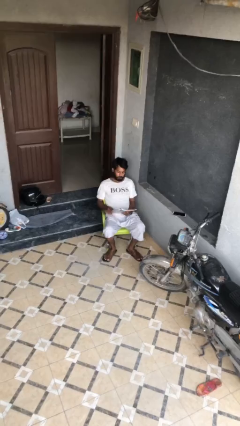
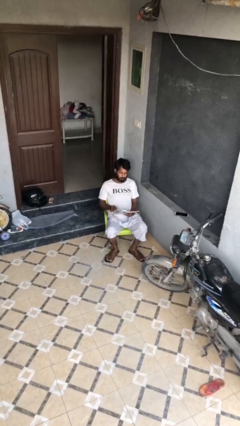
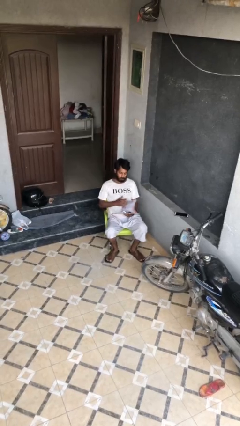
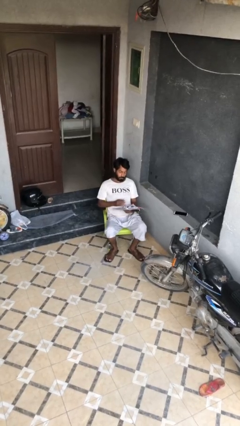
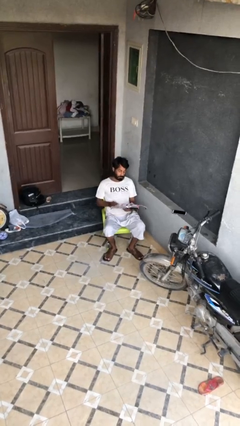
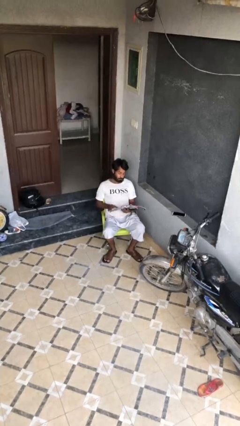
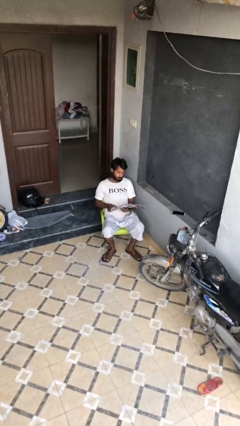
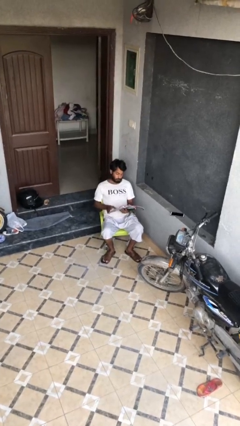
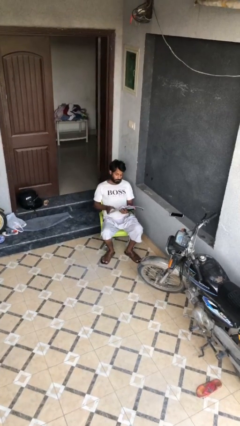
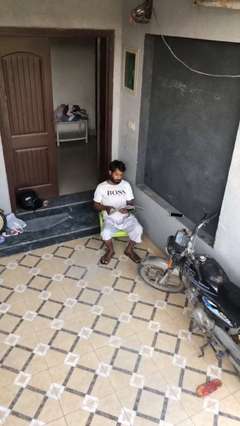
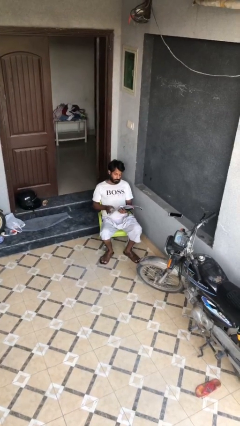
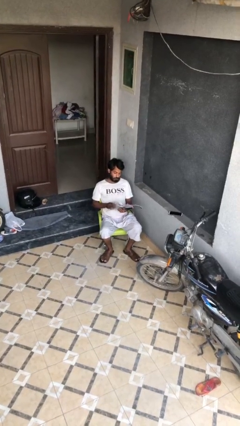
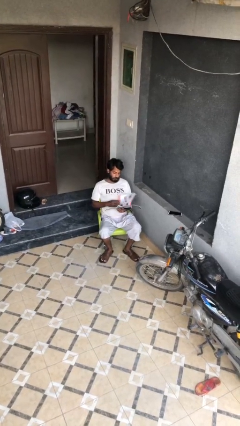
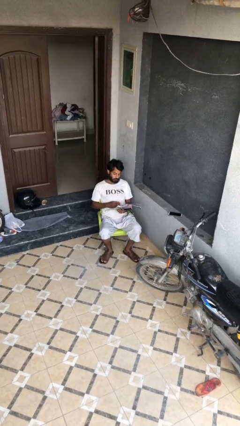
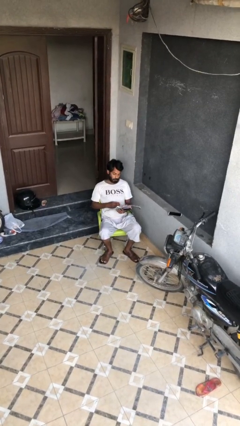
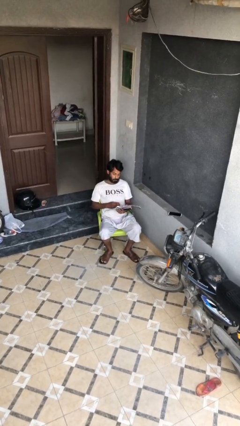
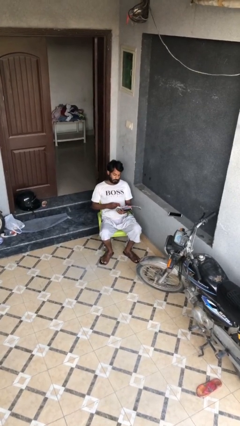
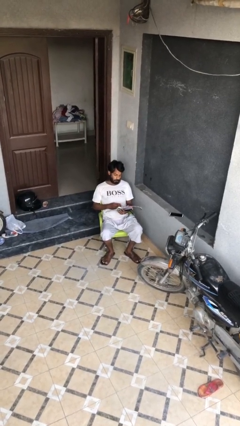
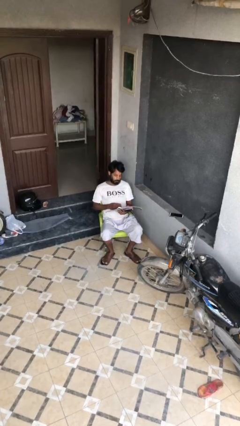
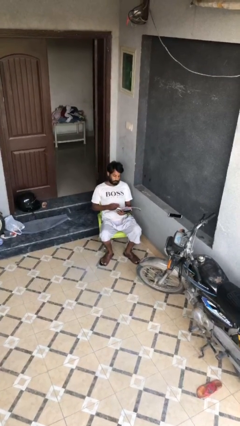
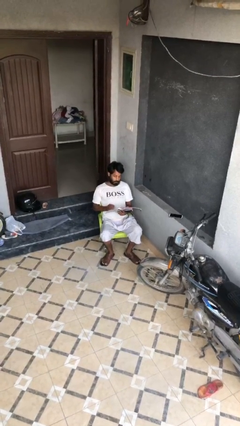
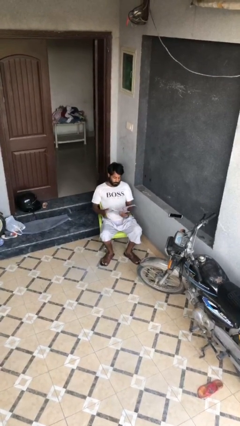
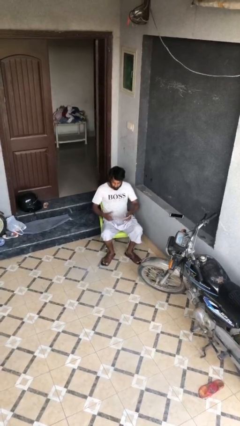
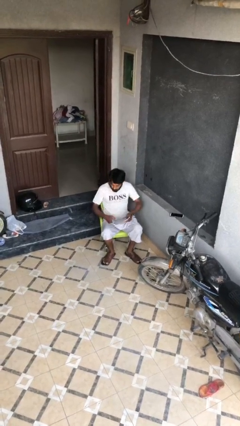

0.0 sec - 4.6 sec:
person reads document

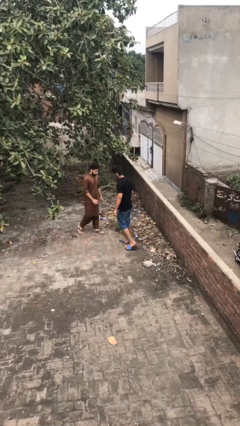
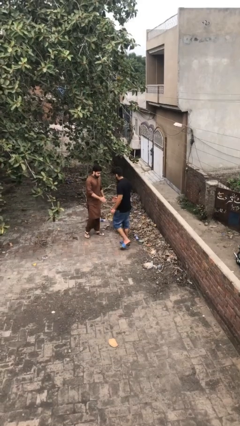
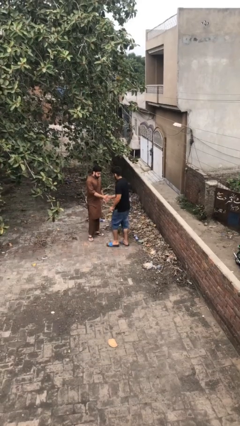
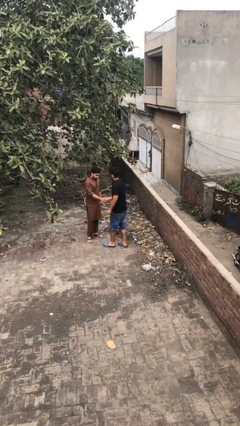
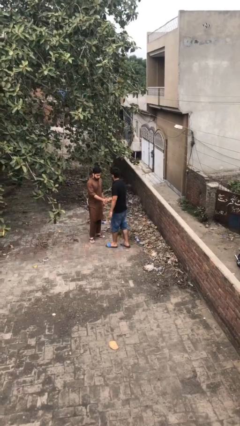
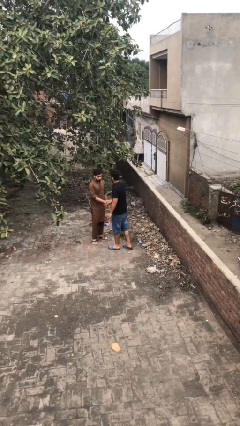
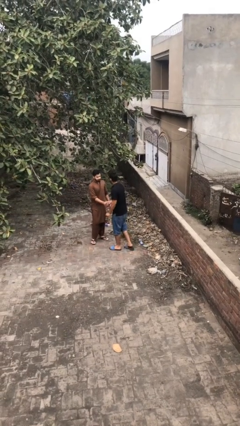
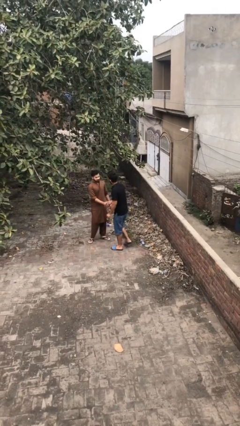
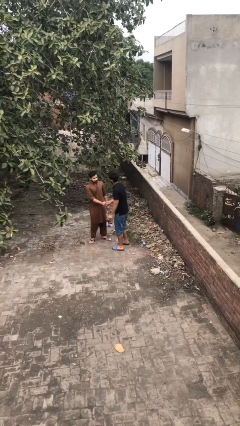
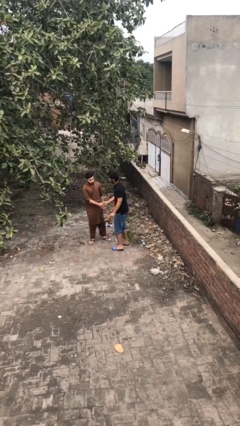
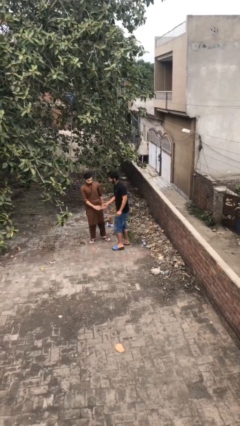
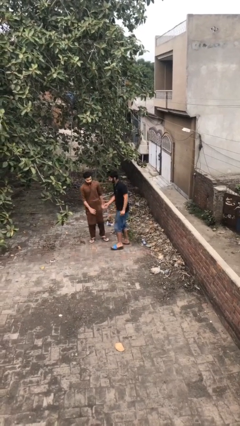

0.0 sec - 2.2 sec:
person shakes hand

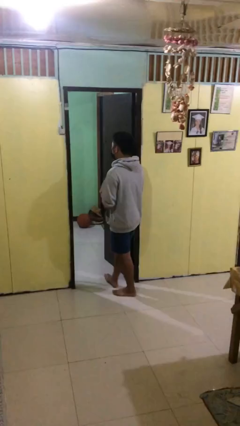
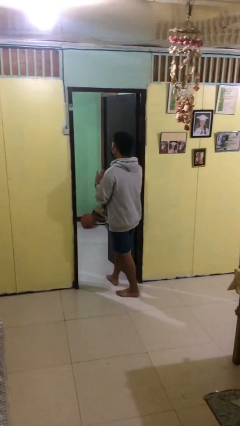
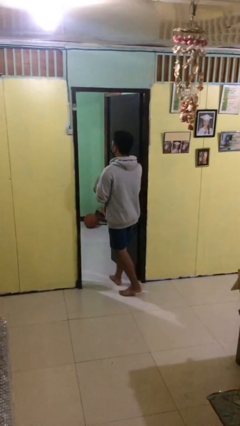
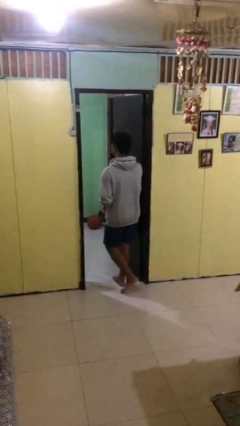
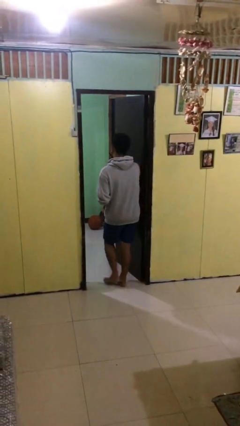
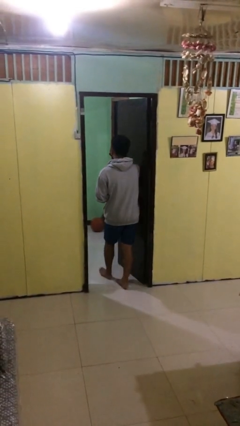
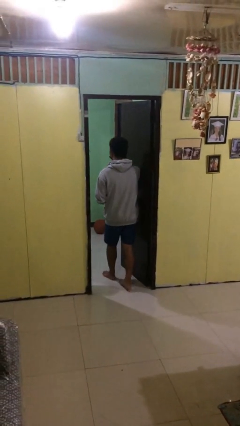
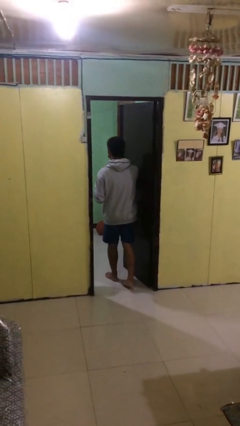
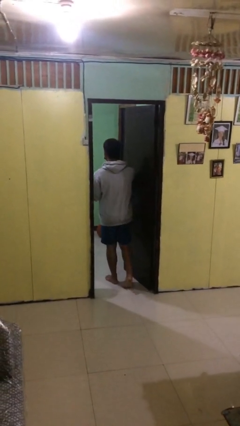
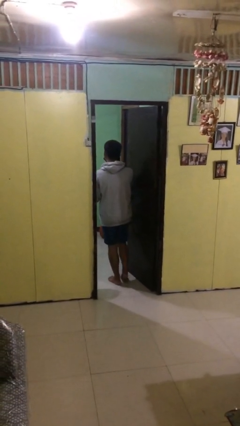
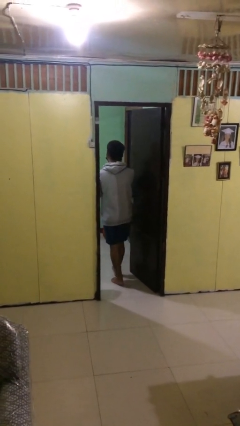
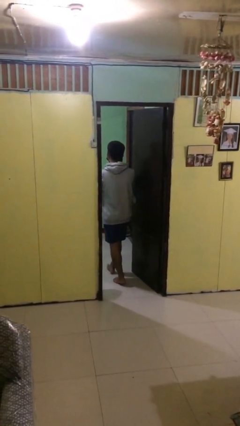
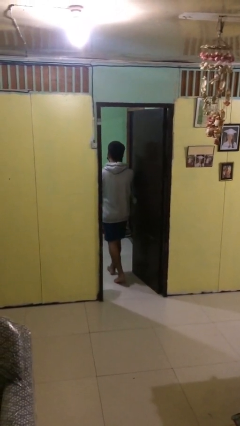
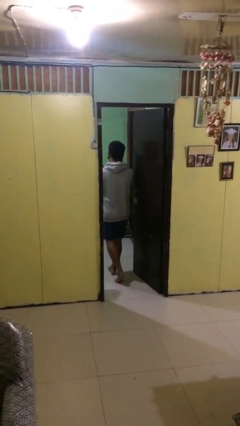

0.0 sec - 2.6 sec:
person exits scene through structure

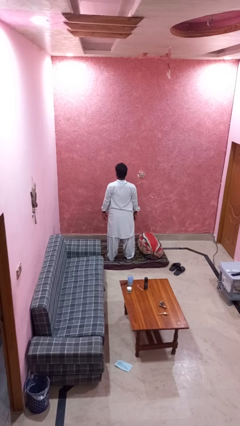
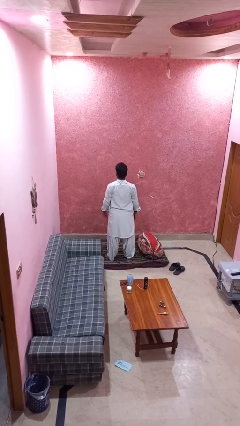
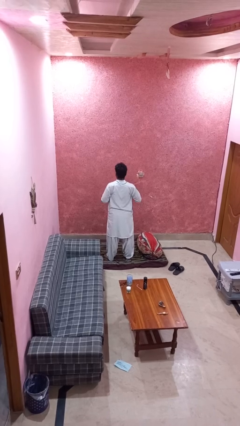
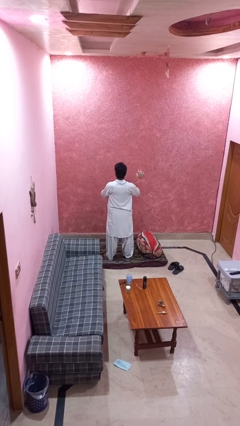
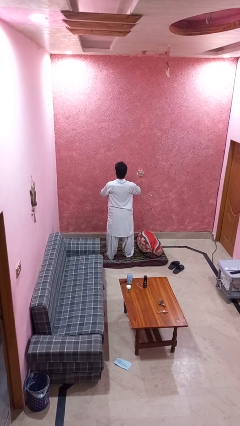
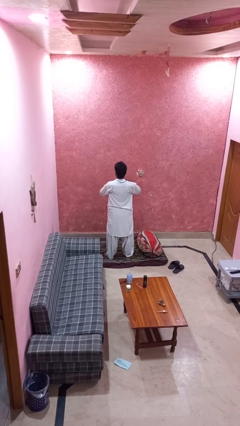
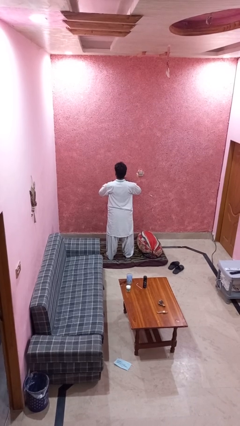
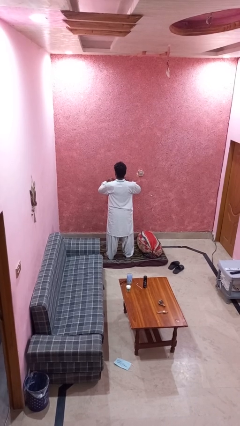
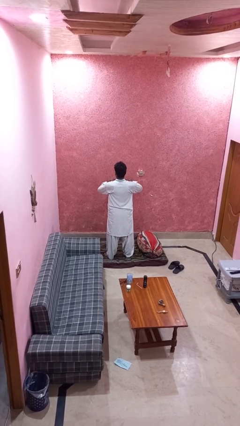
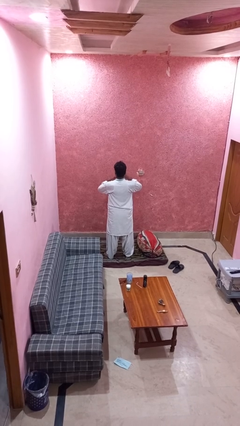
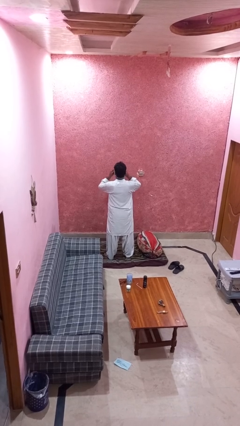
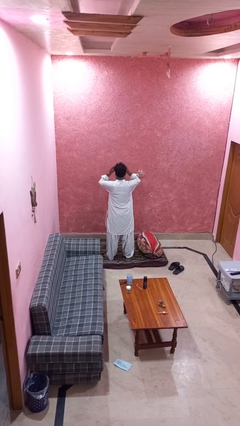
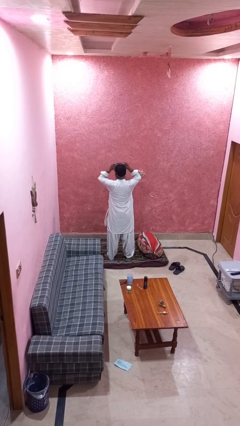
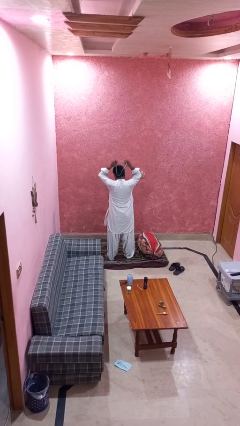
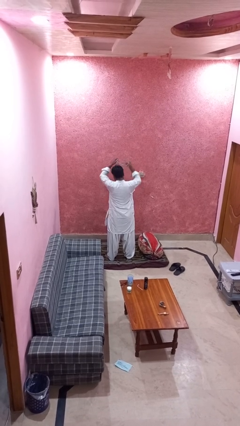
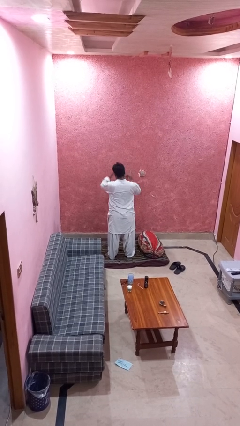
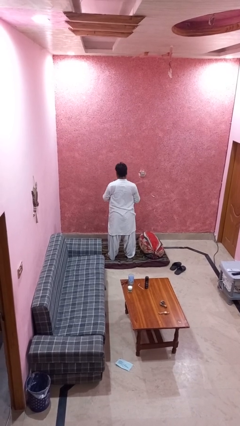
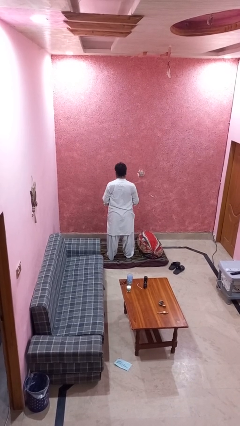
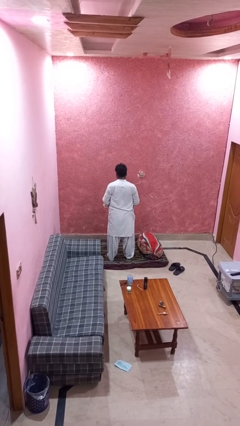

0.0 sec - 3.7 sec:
person takes off necklace

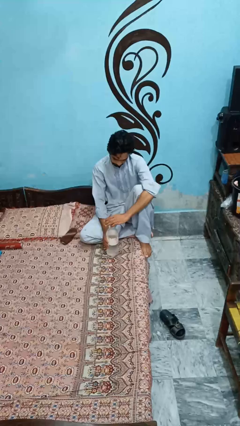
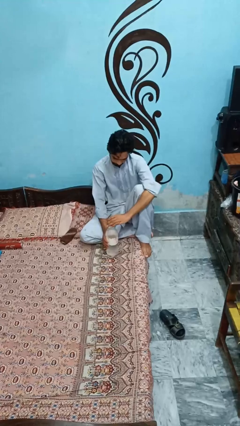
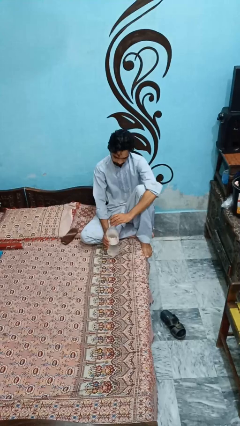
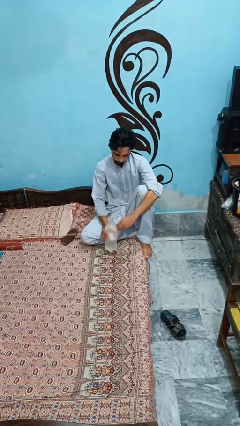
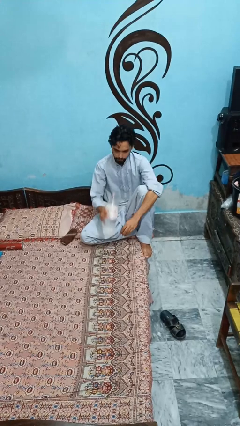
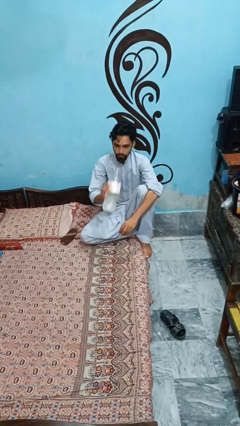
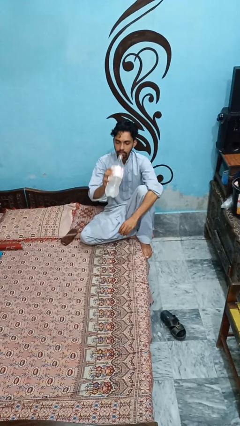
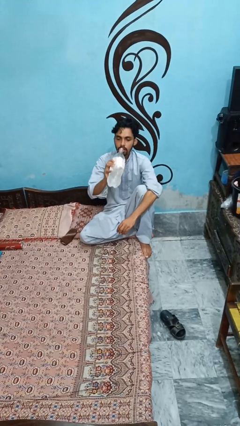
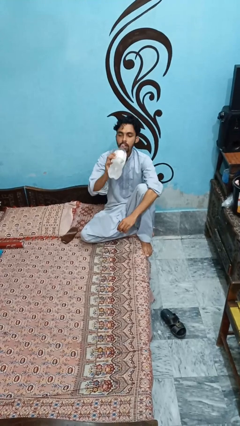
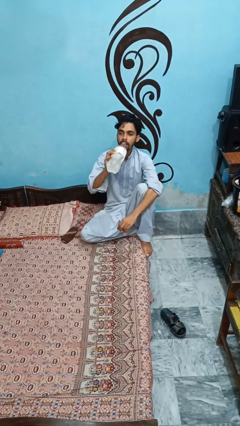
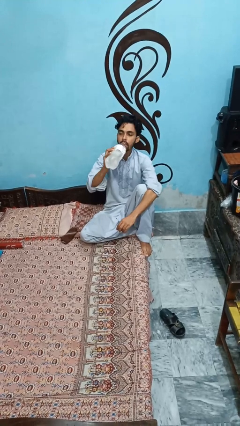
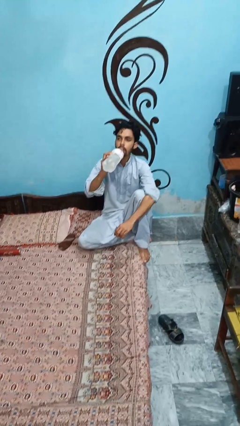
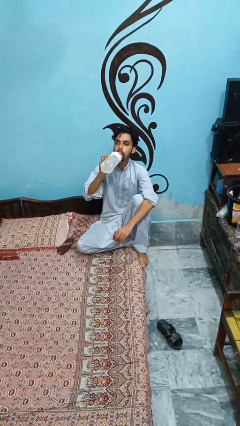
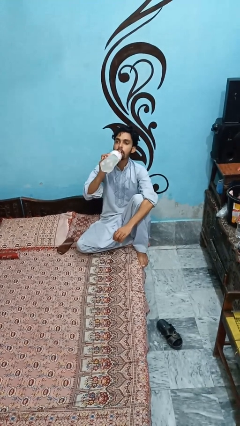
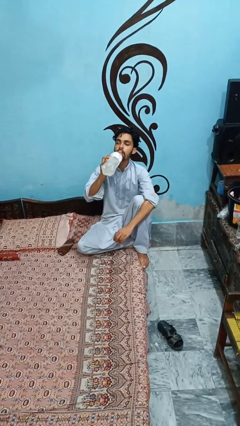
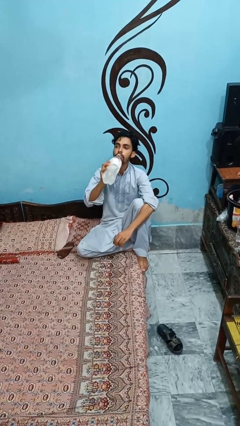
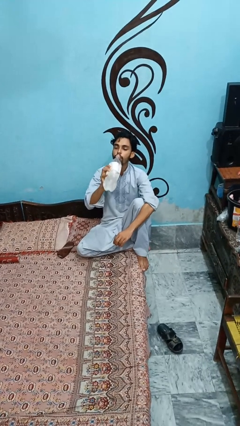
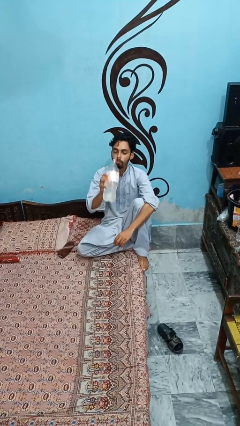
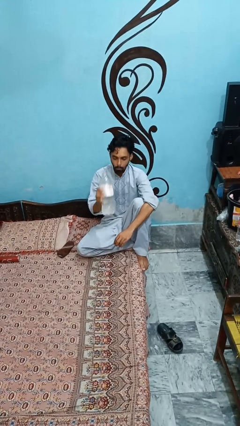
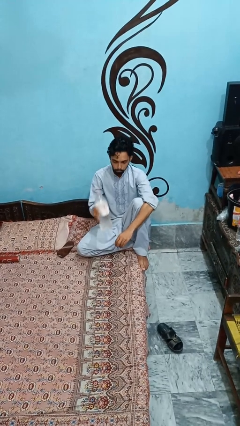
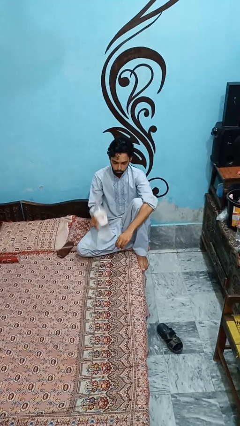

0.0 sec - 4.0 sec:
person drinks from bottle

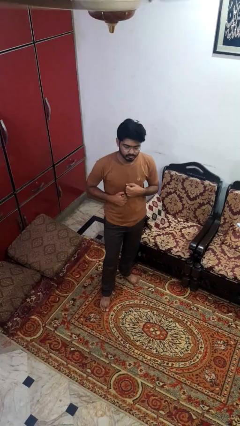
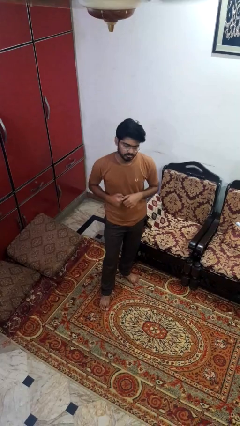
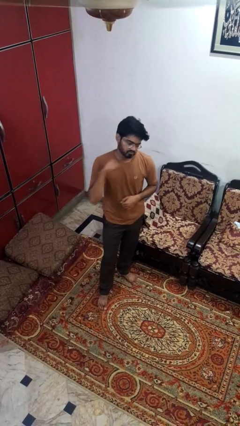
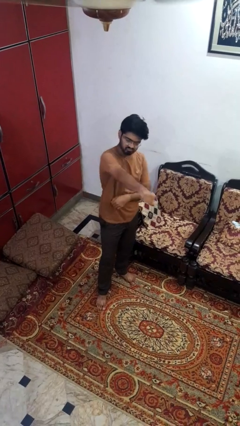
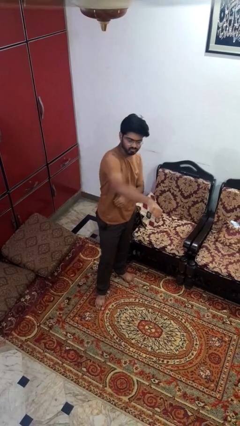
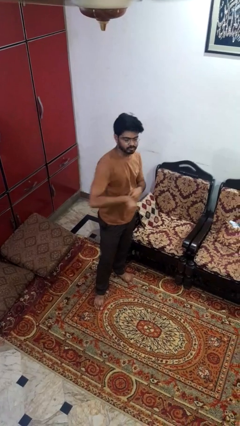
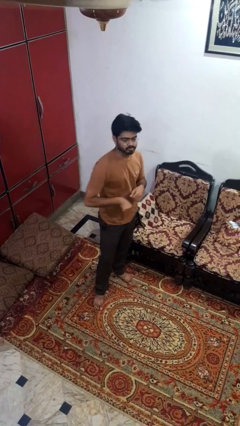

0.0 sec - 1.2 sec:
person punches
